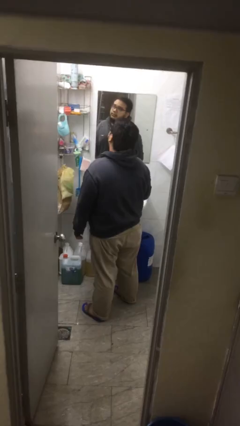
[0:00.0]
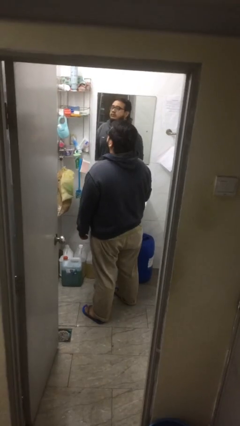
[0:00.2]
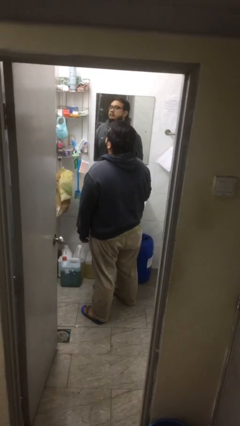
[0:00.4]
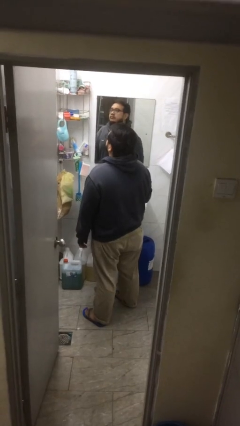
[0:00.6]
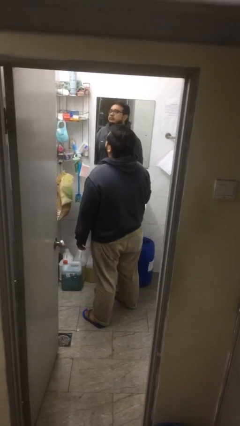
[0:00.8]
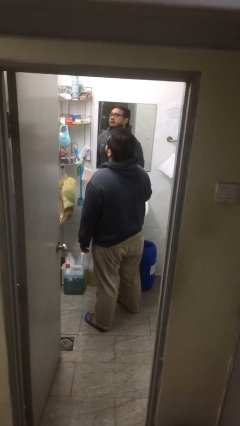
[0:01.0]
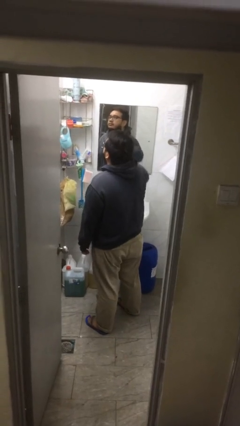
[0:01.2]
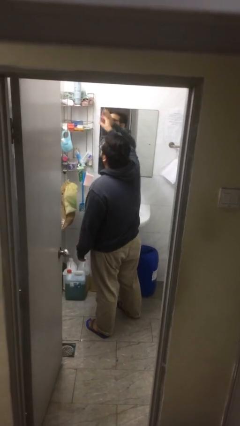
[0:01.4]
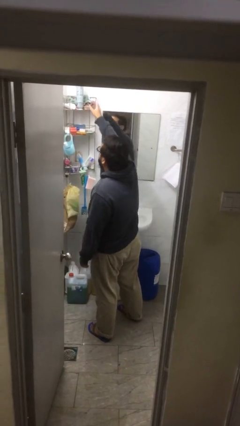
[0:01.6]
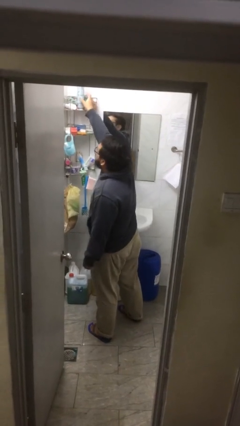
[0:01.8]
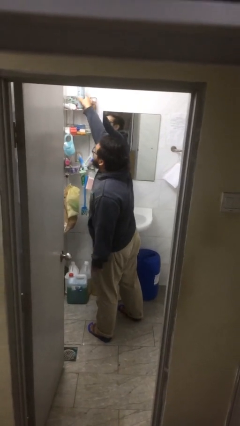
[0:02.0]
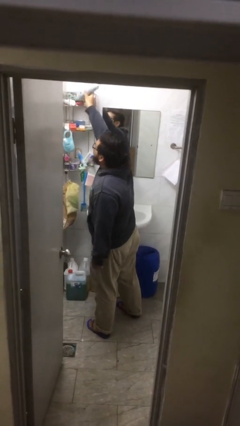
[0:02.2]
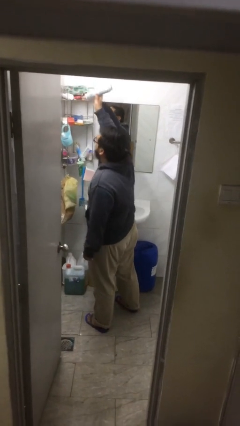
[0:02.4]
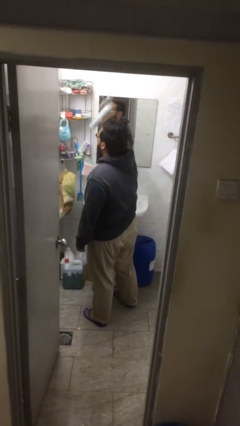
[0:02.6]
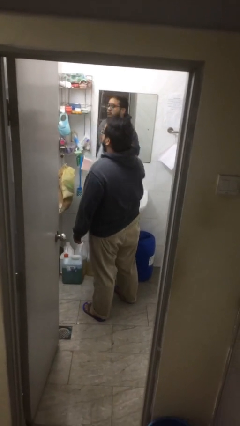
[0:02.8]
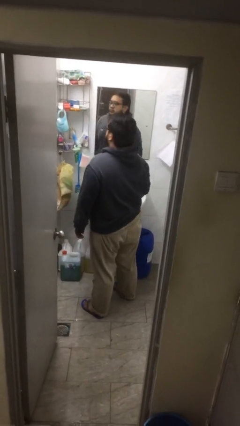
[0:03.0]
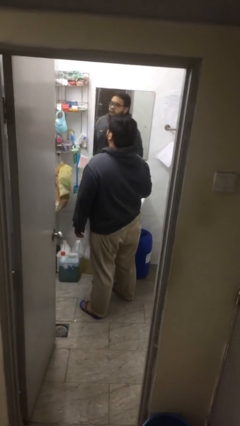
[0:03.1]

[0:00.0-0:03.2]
person picks up object from countertop

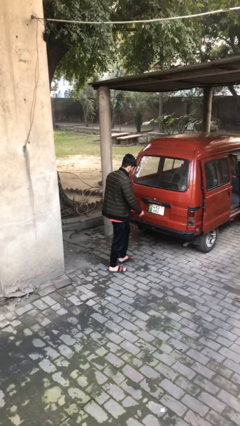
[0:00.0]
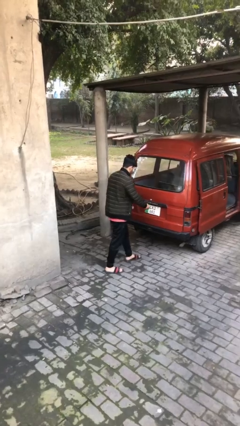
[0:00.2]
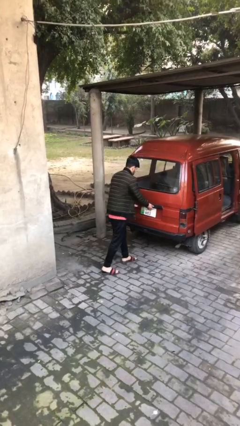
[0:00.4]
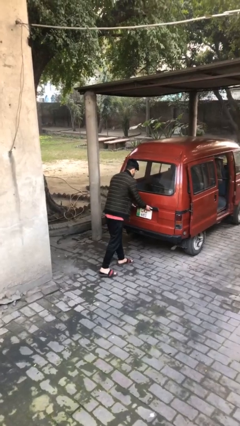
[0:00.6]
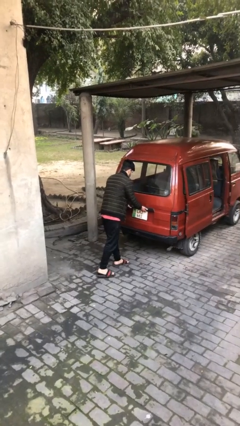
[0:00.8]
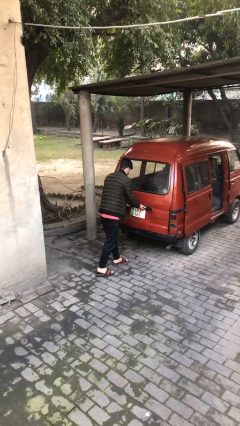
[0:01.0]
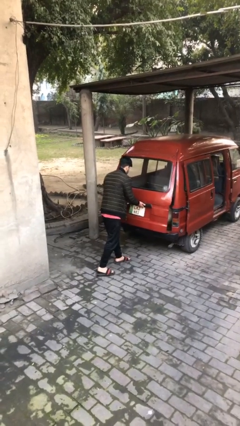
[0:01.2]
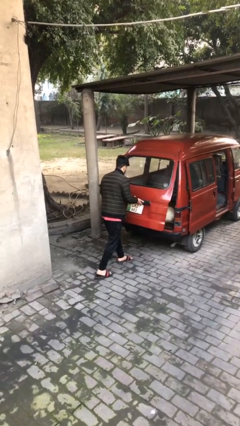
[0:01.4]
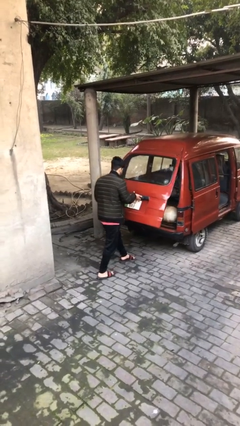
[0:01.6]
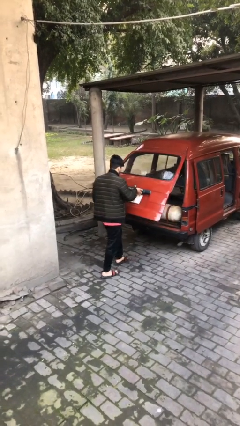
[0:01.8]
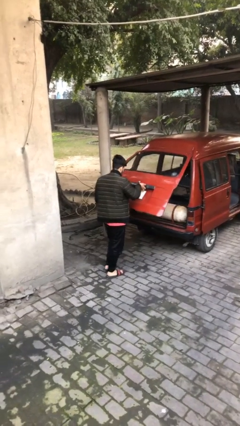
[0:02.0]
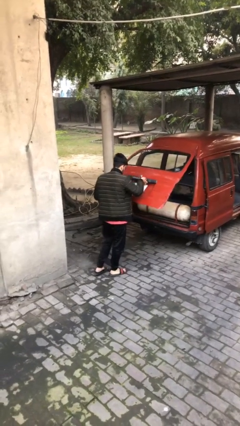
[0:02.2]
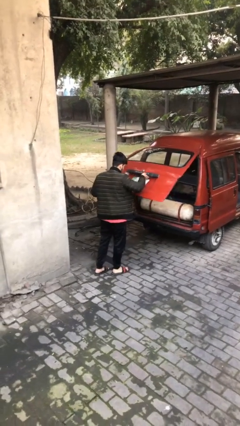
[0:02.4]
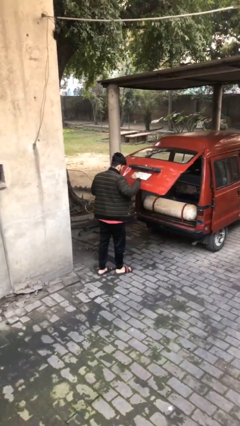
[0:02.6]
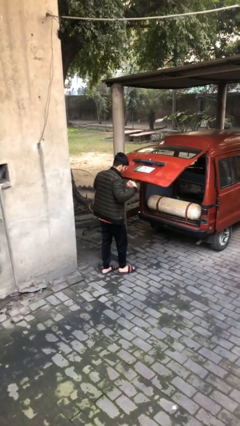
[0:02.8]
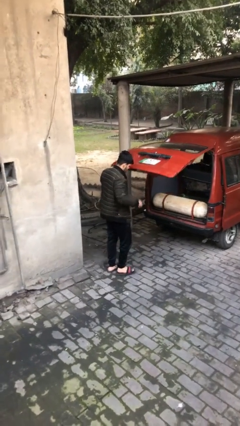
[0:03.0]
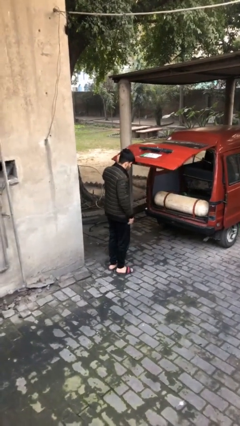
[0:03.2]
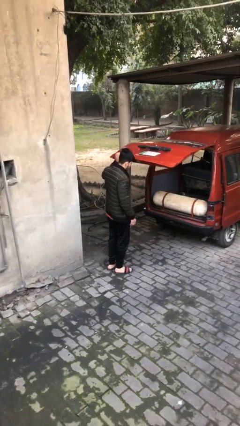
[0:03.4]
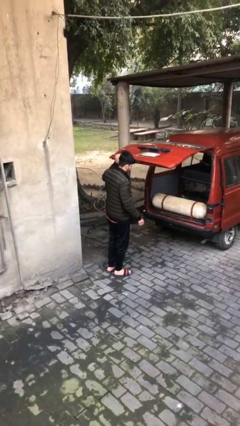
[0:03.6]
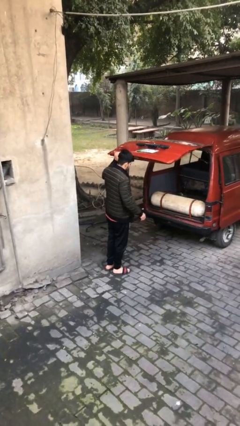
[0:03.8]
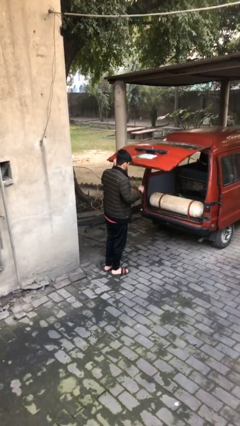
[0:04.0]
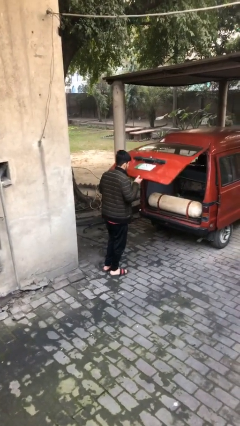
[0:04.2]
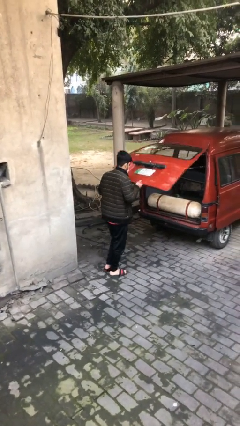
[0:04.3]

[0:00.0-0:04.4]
person opens car trunk

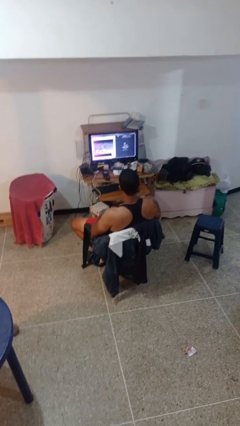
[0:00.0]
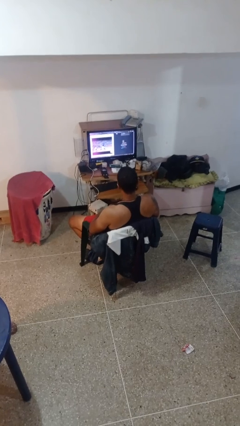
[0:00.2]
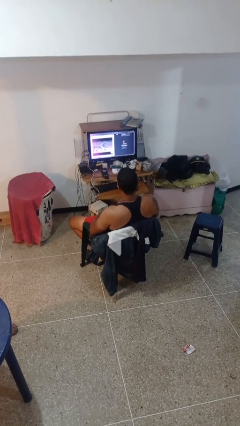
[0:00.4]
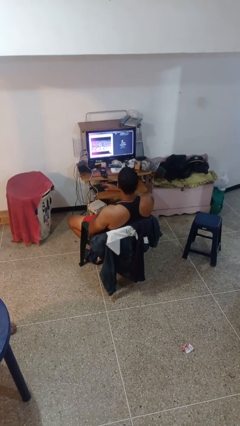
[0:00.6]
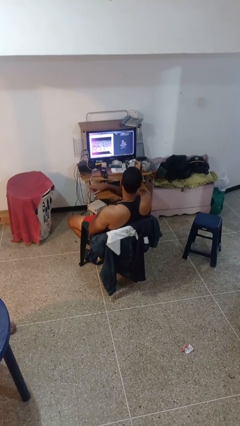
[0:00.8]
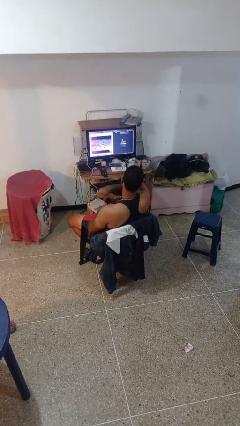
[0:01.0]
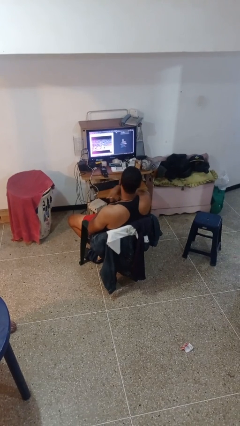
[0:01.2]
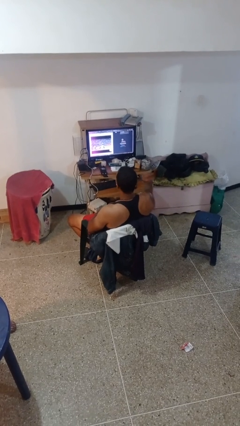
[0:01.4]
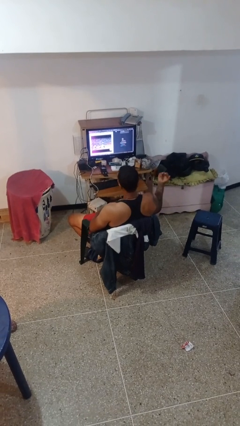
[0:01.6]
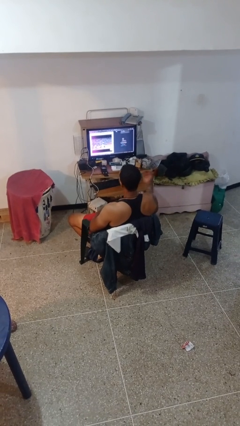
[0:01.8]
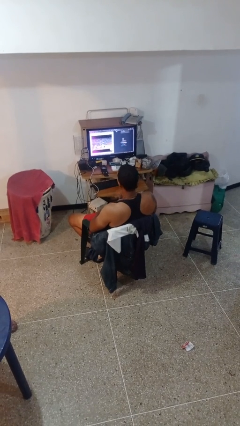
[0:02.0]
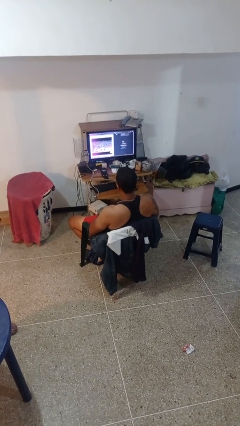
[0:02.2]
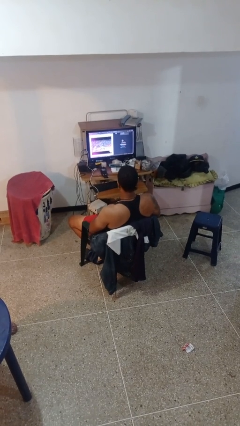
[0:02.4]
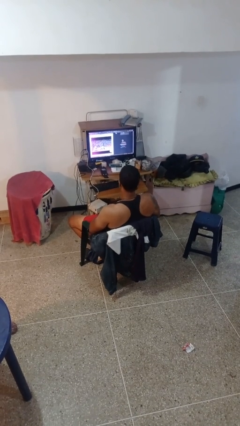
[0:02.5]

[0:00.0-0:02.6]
person gestures cut

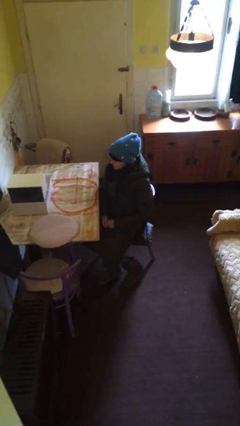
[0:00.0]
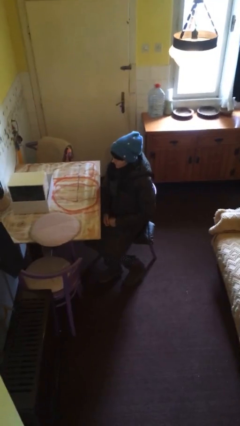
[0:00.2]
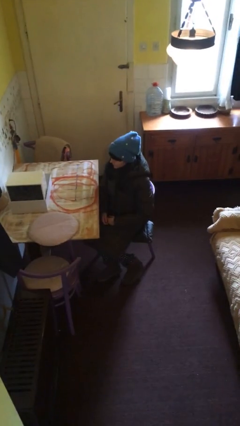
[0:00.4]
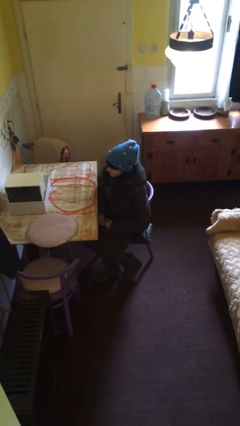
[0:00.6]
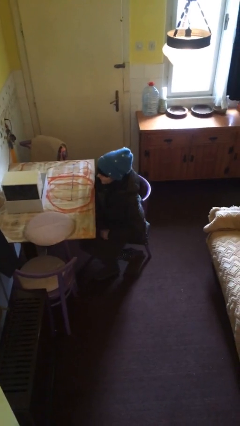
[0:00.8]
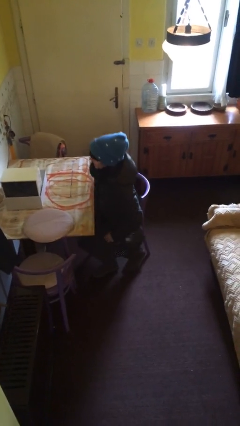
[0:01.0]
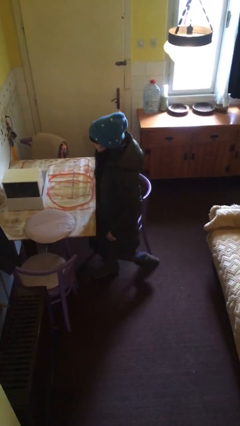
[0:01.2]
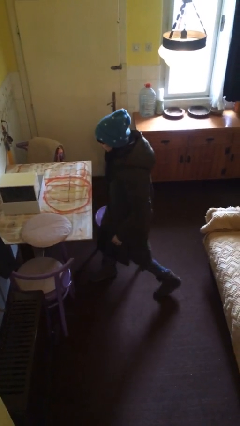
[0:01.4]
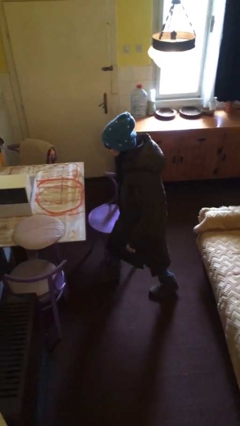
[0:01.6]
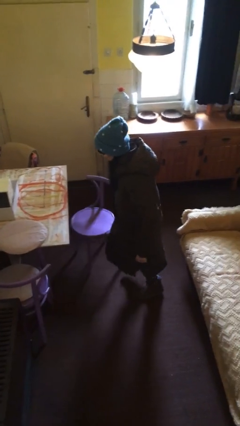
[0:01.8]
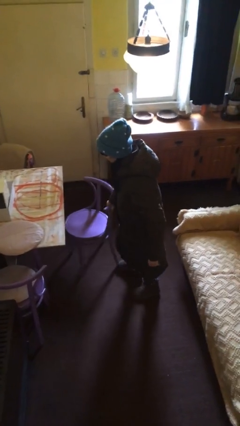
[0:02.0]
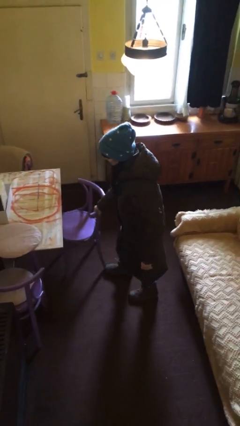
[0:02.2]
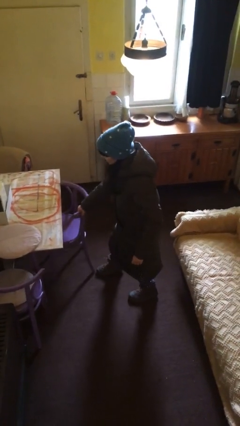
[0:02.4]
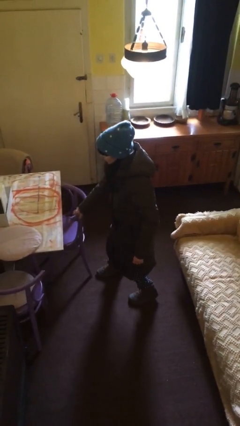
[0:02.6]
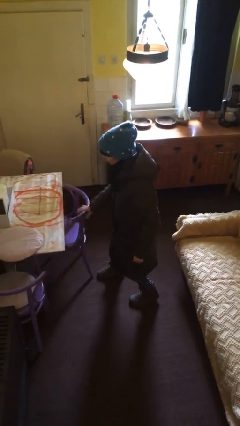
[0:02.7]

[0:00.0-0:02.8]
person stands up

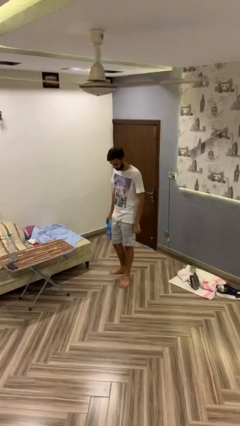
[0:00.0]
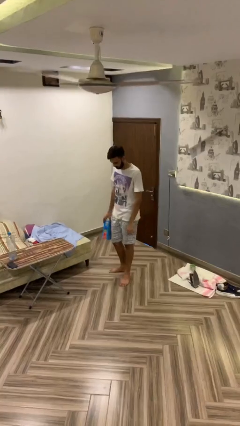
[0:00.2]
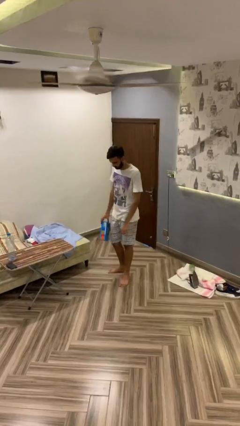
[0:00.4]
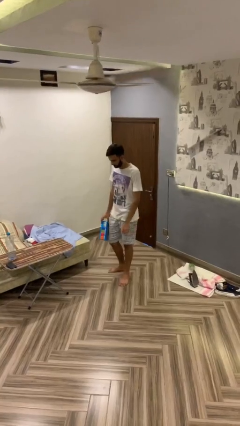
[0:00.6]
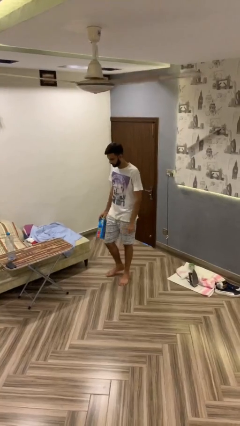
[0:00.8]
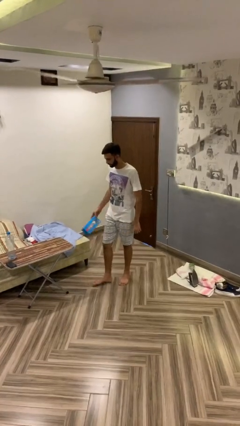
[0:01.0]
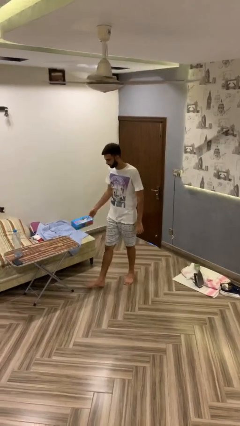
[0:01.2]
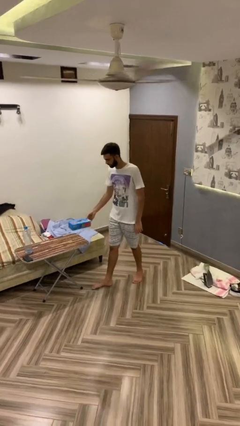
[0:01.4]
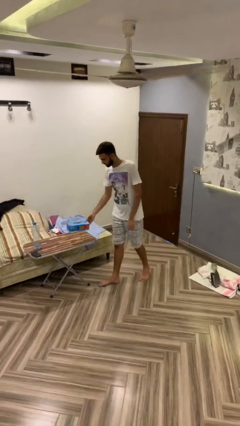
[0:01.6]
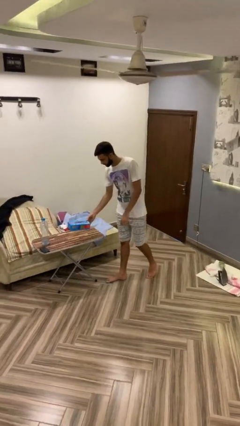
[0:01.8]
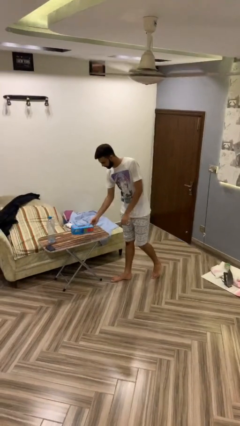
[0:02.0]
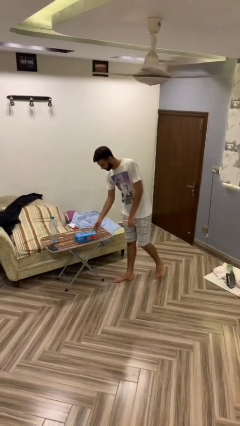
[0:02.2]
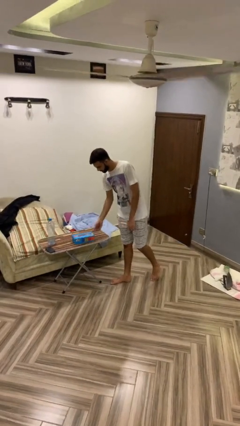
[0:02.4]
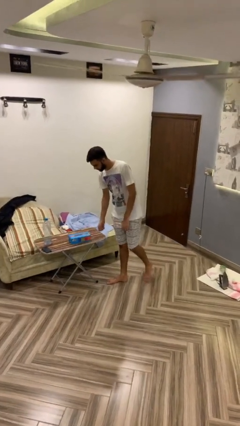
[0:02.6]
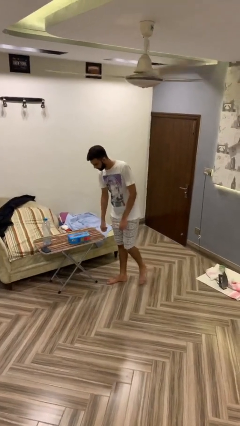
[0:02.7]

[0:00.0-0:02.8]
person puts down object on table

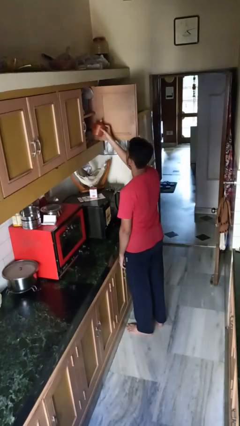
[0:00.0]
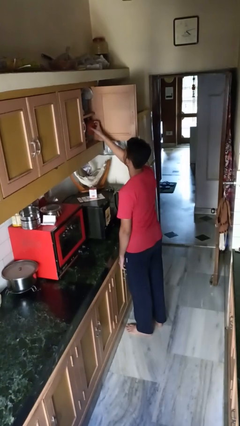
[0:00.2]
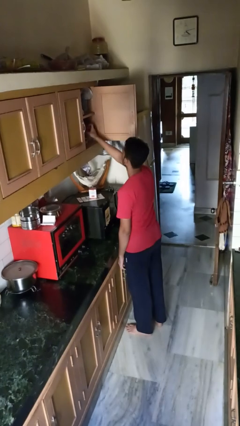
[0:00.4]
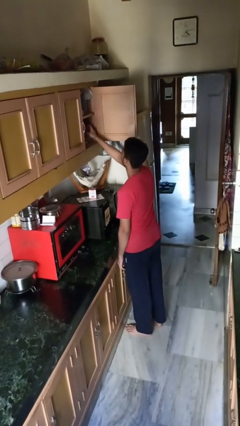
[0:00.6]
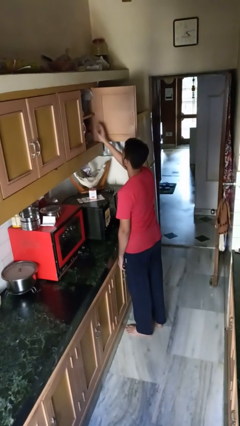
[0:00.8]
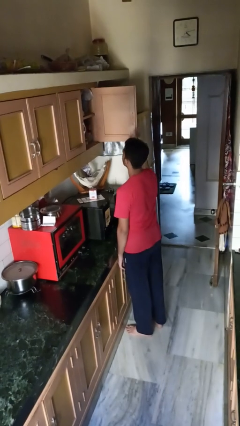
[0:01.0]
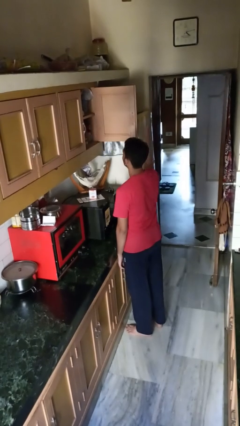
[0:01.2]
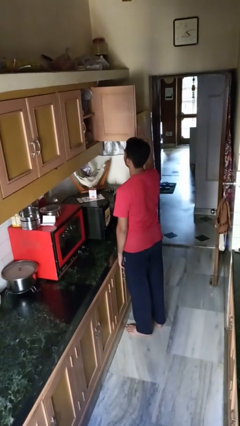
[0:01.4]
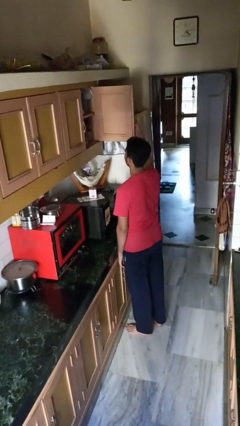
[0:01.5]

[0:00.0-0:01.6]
person puts object in cabinet
